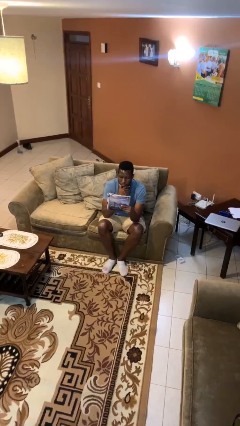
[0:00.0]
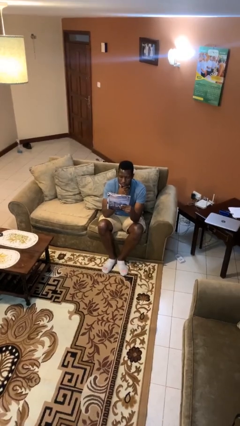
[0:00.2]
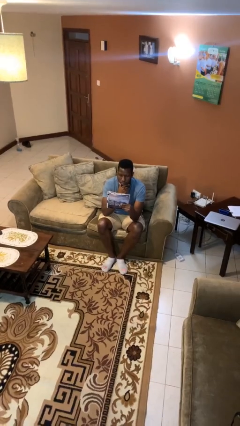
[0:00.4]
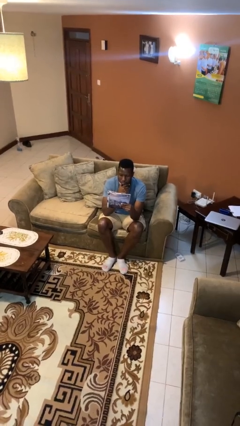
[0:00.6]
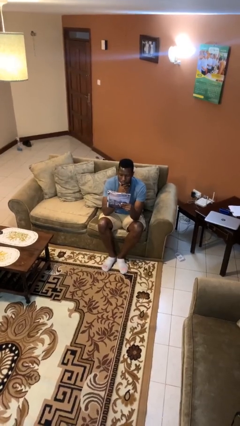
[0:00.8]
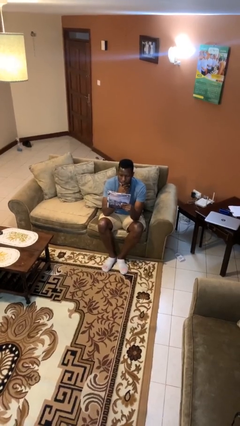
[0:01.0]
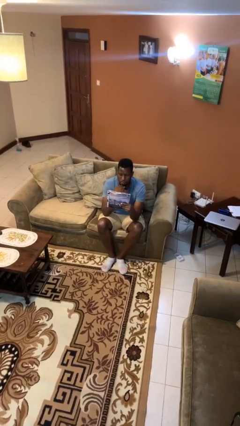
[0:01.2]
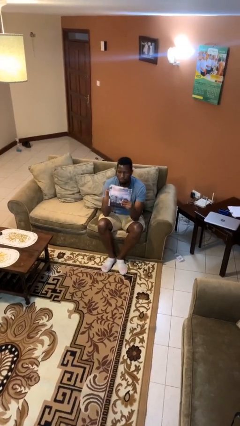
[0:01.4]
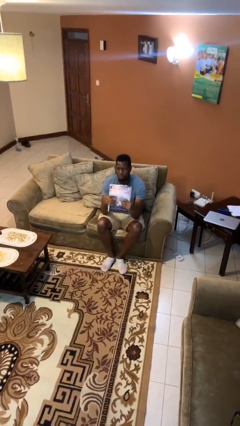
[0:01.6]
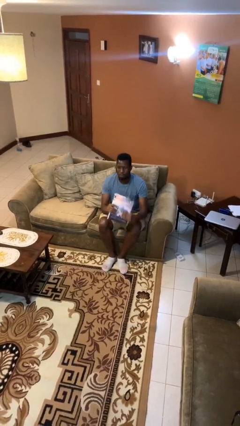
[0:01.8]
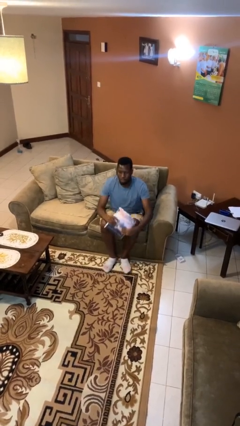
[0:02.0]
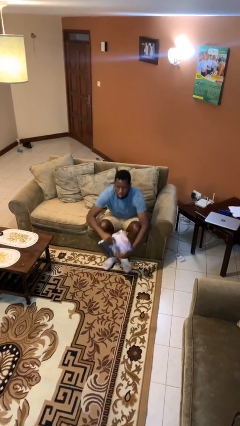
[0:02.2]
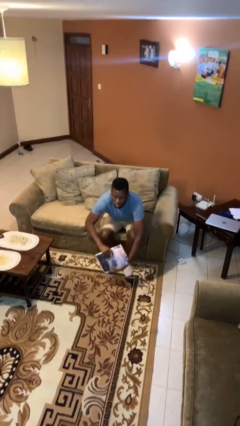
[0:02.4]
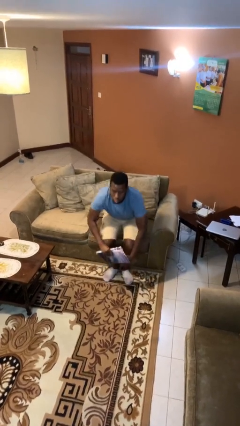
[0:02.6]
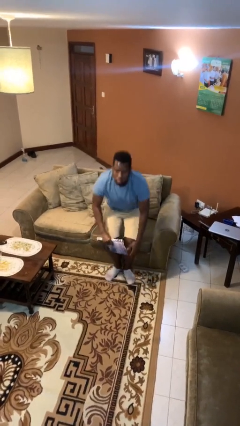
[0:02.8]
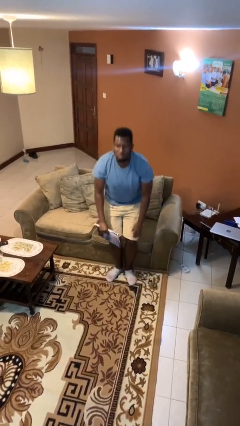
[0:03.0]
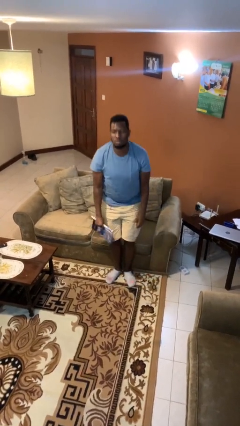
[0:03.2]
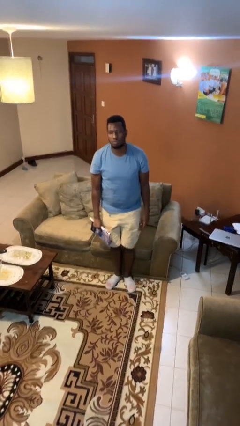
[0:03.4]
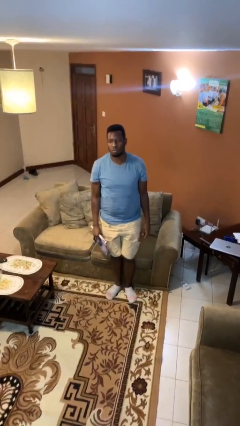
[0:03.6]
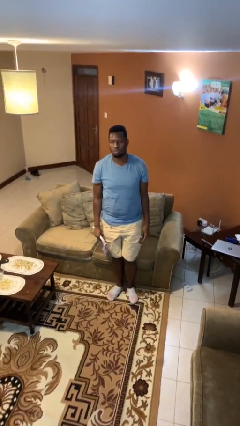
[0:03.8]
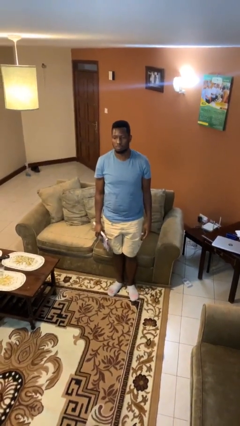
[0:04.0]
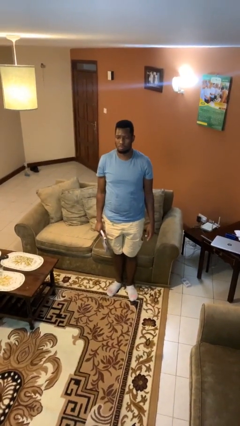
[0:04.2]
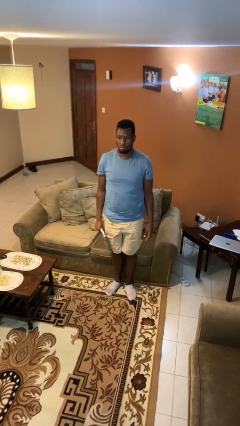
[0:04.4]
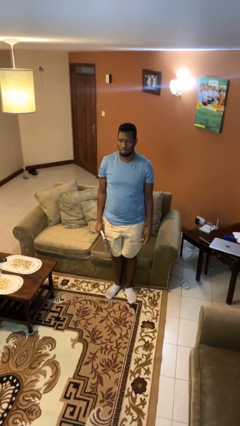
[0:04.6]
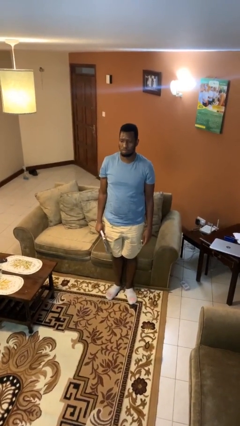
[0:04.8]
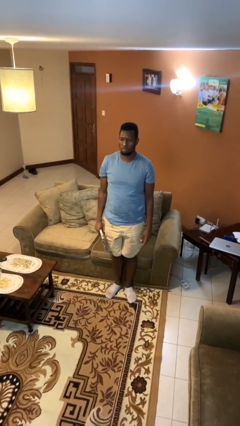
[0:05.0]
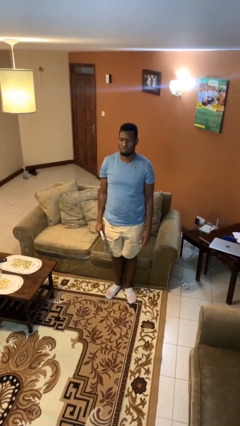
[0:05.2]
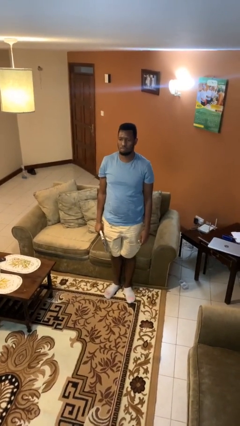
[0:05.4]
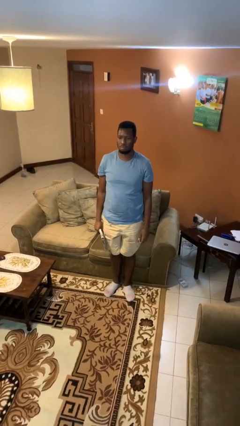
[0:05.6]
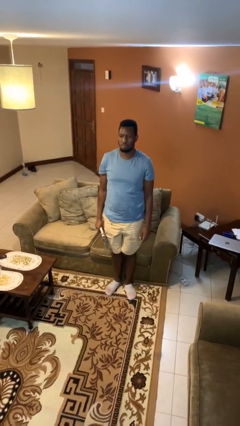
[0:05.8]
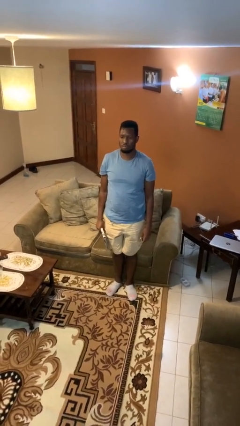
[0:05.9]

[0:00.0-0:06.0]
person stands up

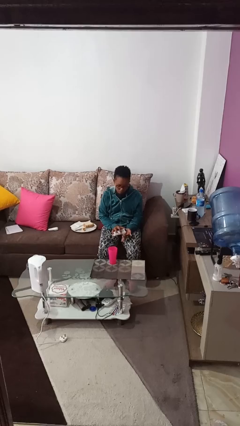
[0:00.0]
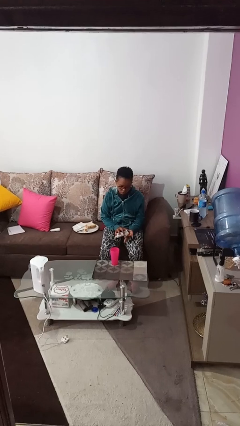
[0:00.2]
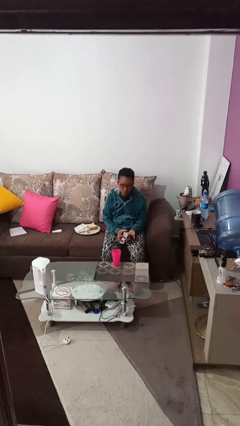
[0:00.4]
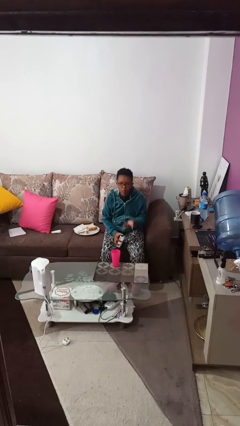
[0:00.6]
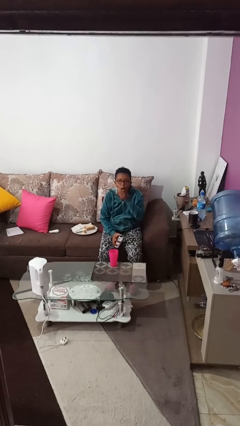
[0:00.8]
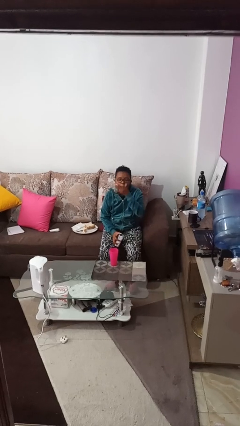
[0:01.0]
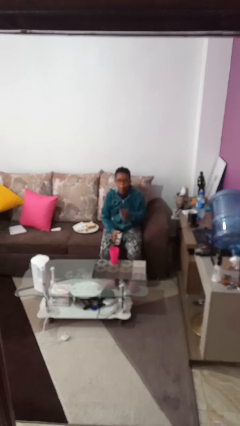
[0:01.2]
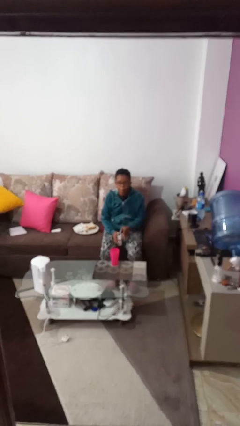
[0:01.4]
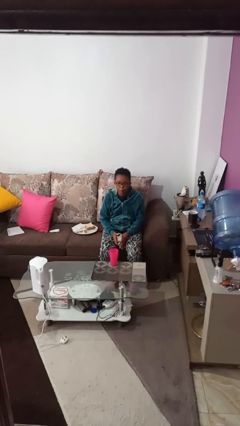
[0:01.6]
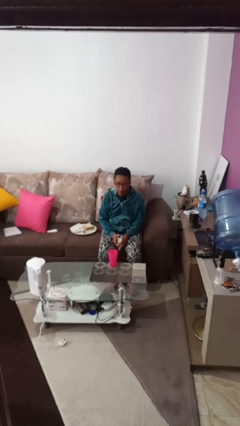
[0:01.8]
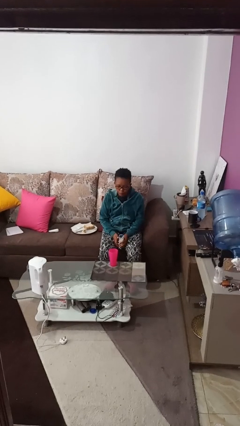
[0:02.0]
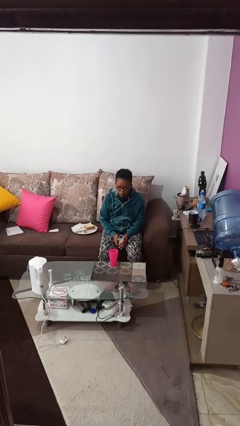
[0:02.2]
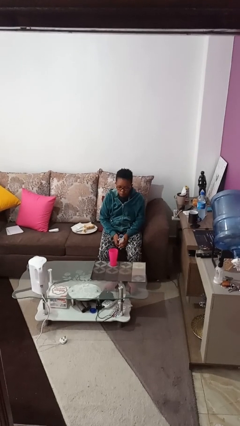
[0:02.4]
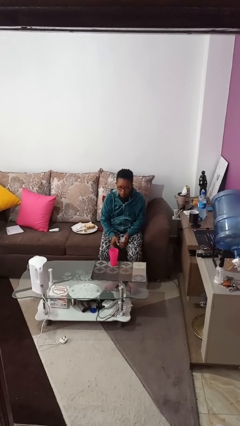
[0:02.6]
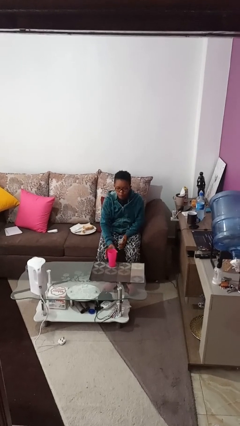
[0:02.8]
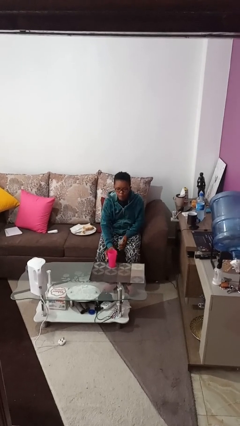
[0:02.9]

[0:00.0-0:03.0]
person takes medicine pills

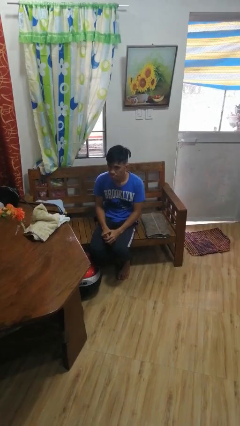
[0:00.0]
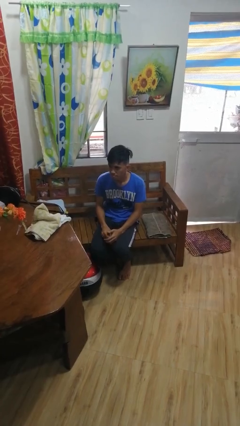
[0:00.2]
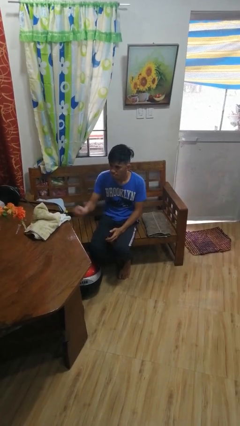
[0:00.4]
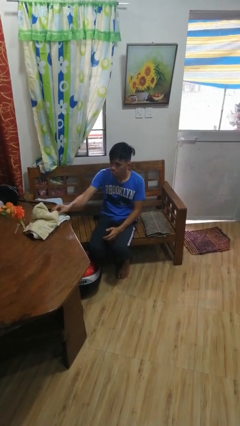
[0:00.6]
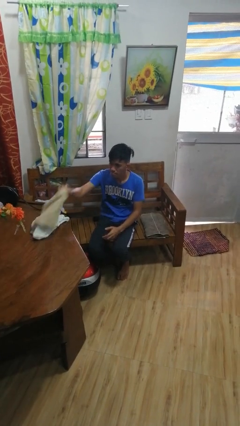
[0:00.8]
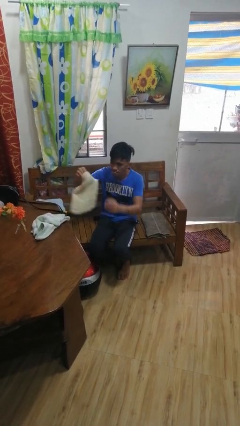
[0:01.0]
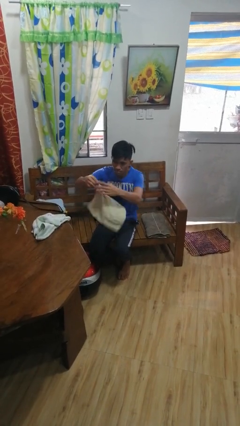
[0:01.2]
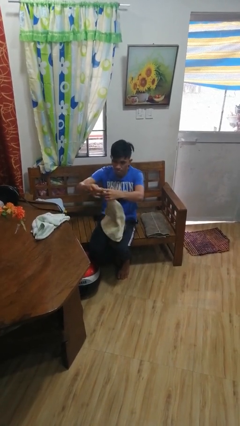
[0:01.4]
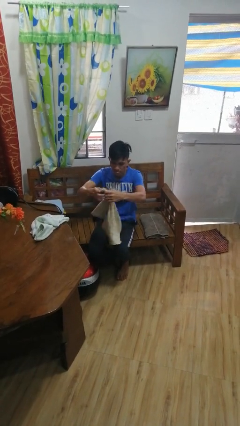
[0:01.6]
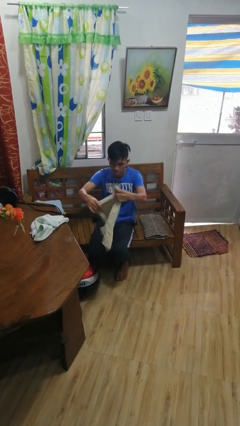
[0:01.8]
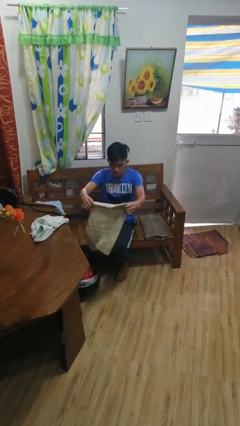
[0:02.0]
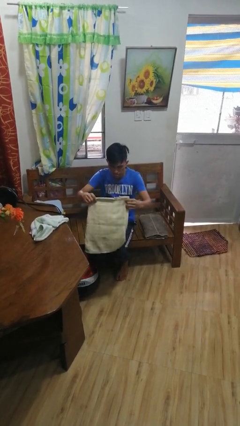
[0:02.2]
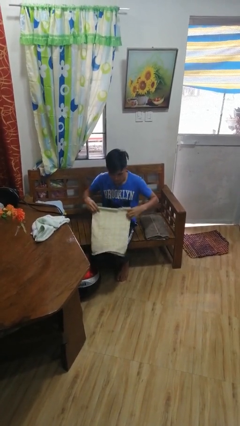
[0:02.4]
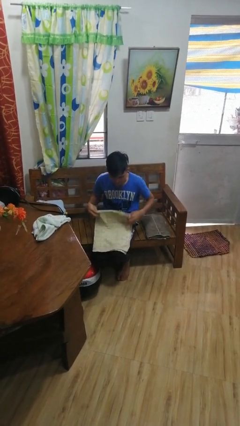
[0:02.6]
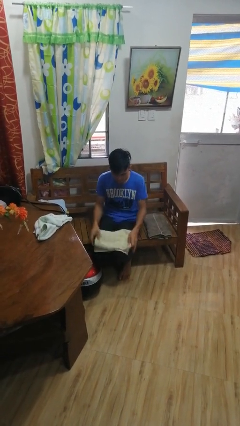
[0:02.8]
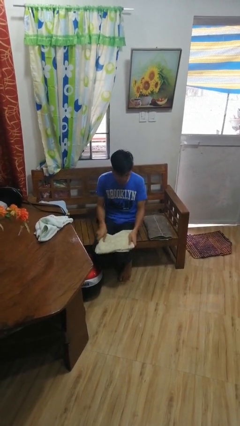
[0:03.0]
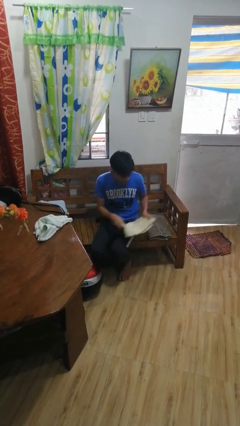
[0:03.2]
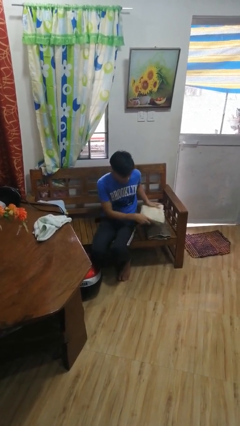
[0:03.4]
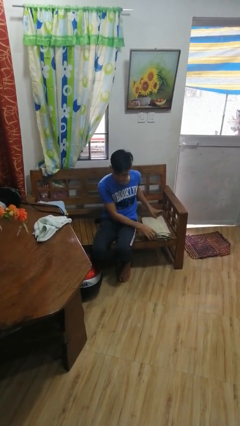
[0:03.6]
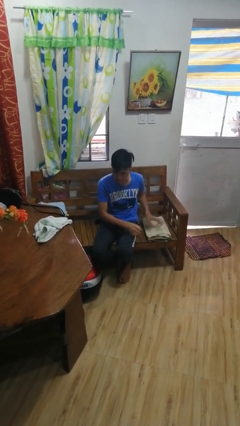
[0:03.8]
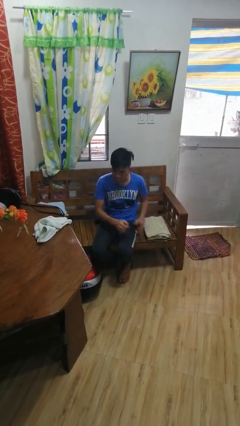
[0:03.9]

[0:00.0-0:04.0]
person folds towel

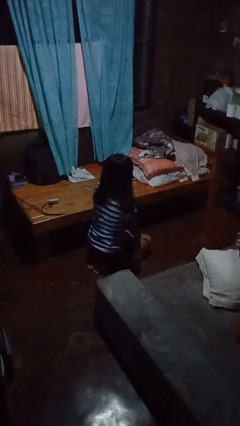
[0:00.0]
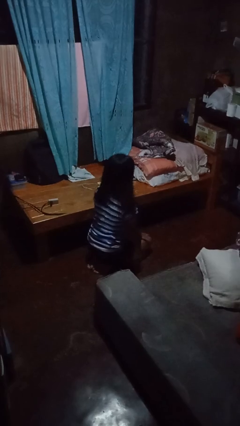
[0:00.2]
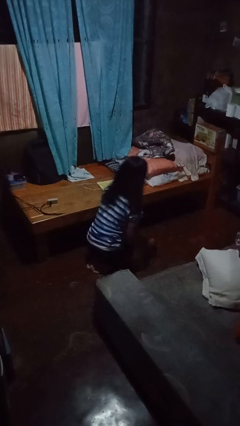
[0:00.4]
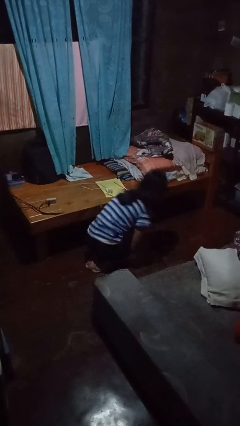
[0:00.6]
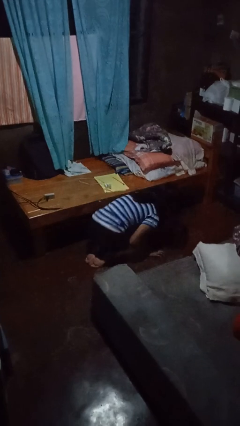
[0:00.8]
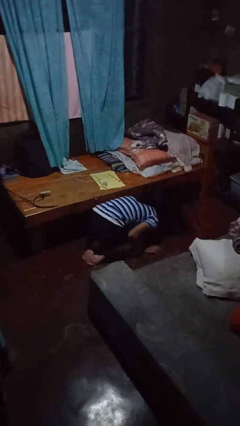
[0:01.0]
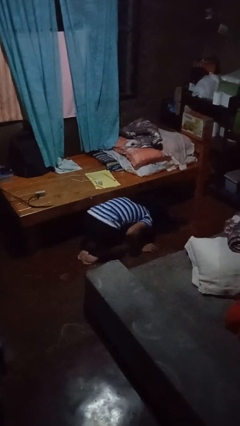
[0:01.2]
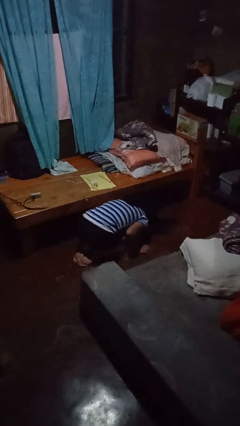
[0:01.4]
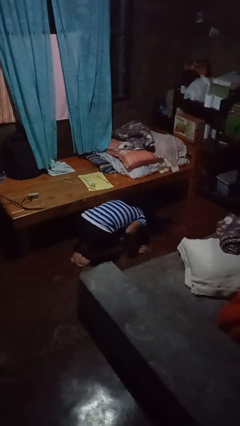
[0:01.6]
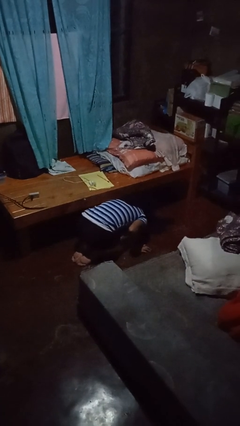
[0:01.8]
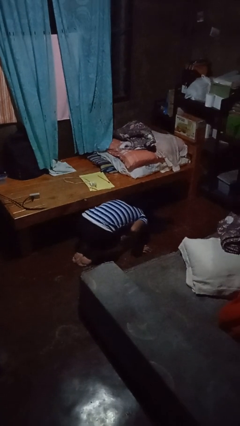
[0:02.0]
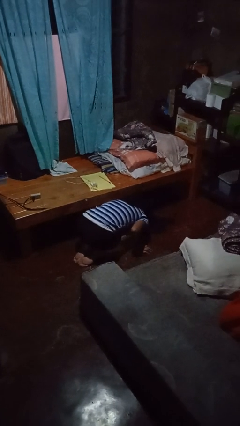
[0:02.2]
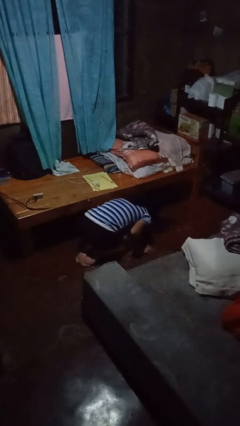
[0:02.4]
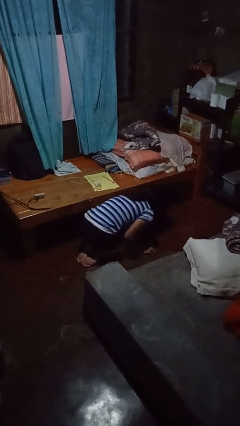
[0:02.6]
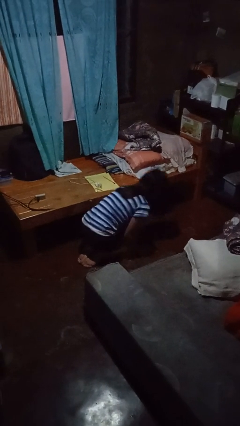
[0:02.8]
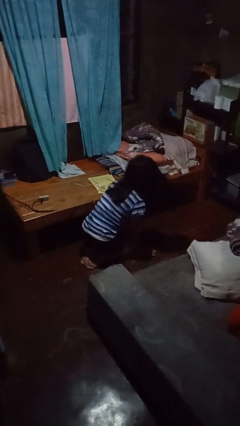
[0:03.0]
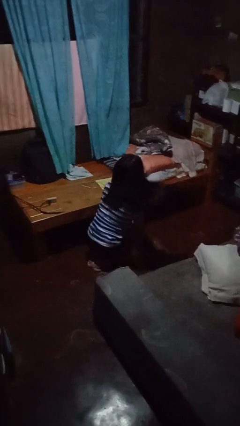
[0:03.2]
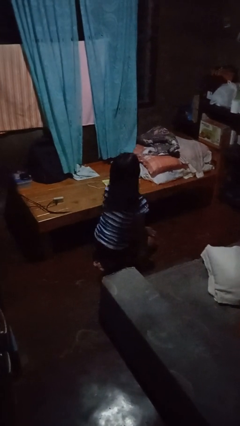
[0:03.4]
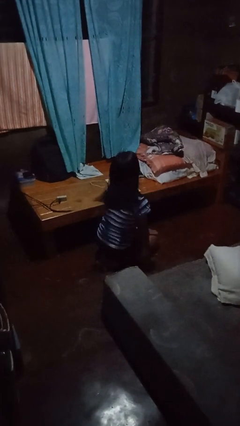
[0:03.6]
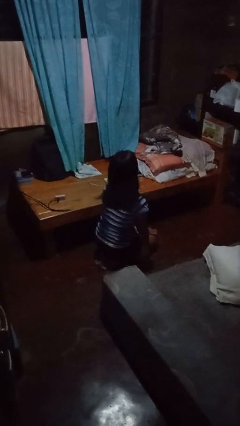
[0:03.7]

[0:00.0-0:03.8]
person searches under bed

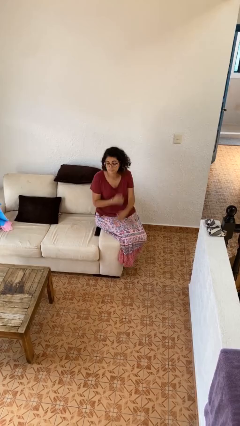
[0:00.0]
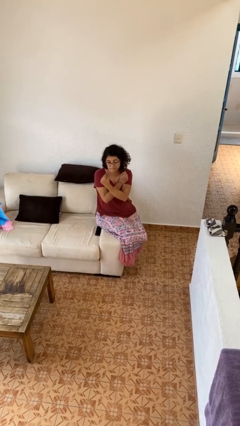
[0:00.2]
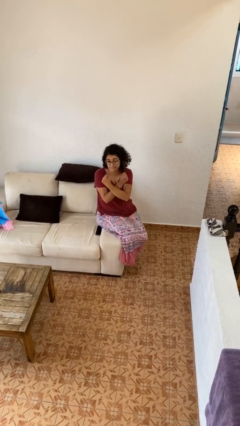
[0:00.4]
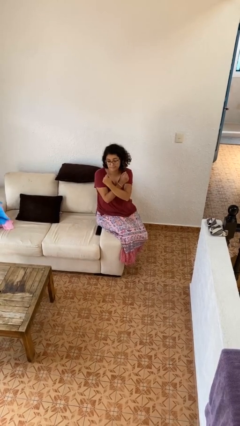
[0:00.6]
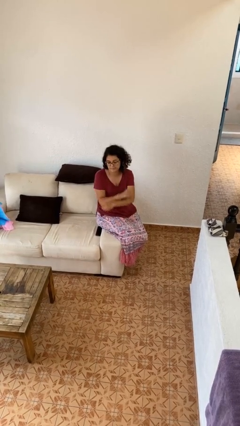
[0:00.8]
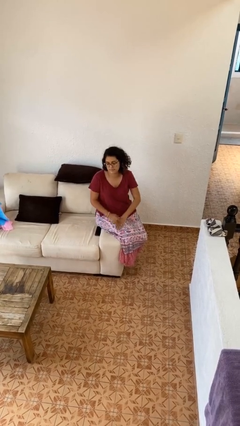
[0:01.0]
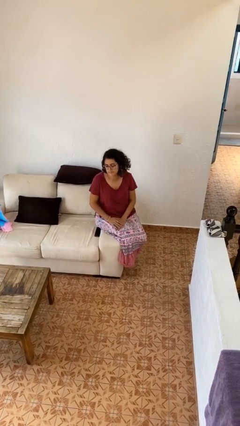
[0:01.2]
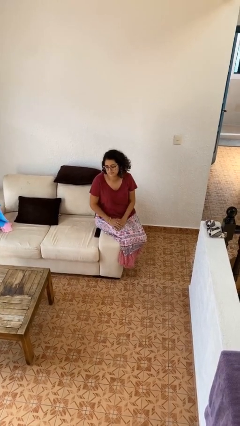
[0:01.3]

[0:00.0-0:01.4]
person gestures arms x
